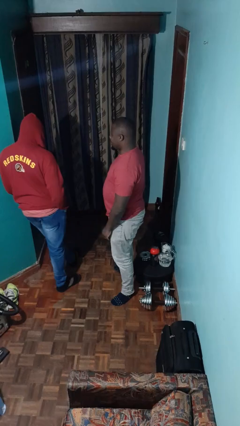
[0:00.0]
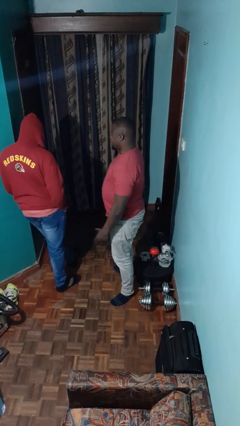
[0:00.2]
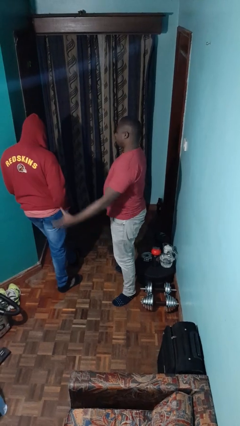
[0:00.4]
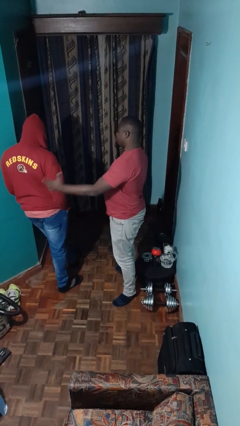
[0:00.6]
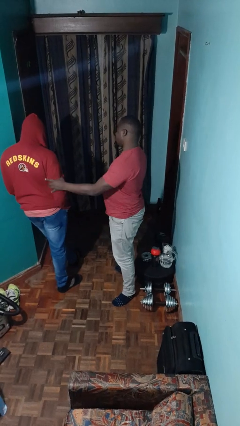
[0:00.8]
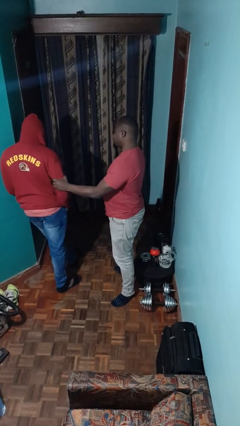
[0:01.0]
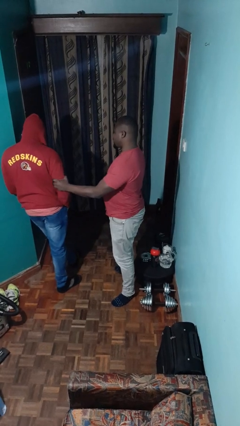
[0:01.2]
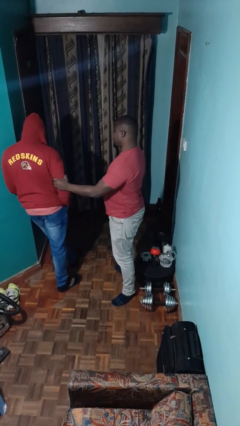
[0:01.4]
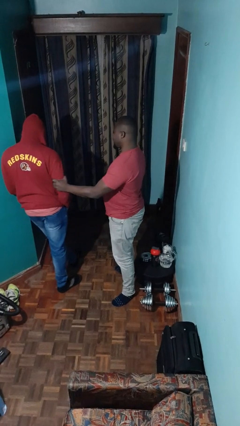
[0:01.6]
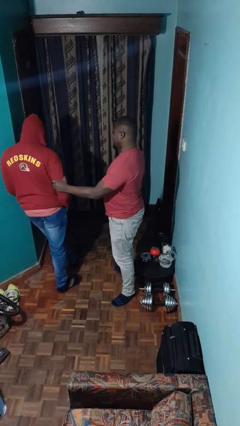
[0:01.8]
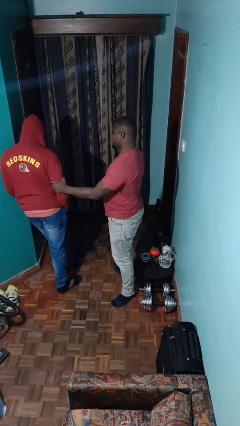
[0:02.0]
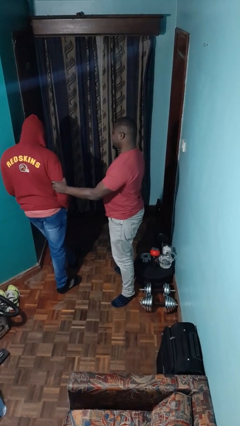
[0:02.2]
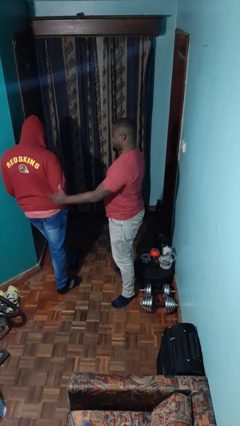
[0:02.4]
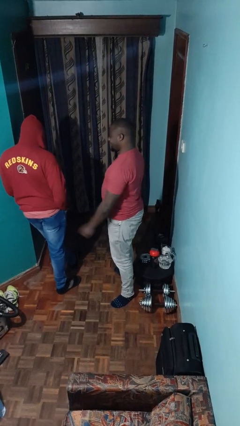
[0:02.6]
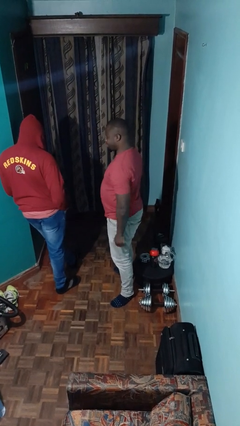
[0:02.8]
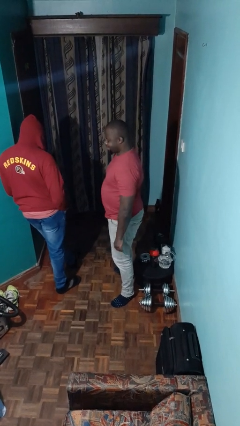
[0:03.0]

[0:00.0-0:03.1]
person grabs person by bicep

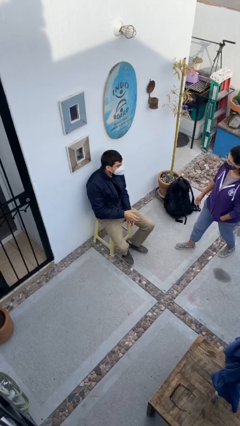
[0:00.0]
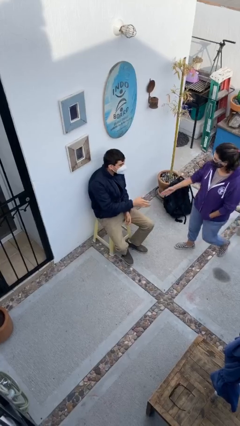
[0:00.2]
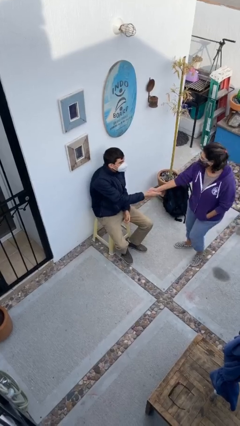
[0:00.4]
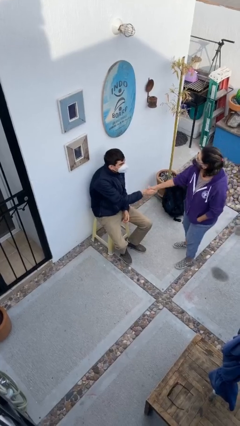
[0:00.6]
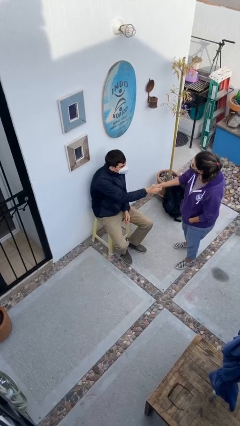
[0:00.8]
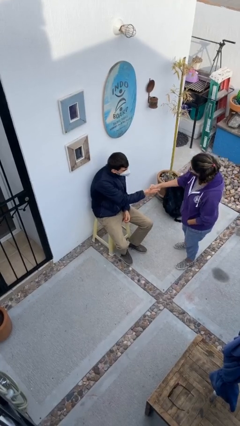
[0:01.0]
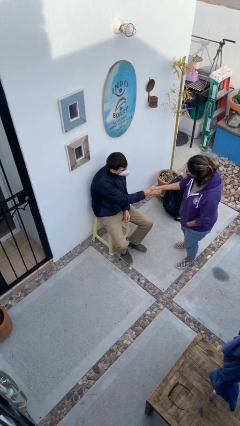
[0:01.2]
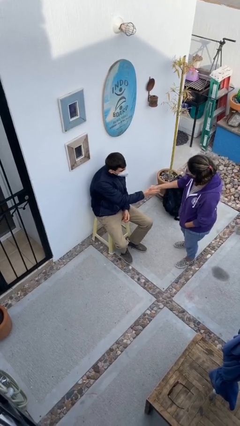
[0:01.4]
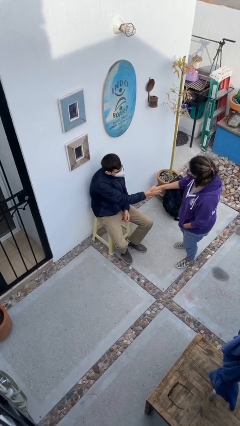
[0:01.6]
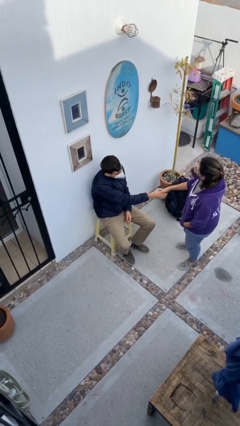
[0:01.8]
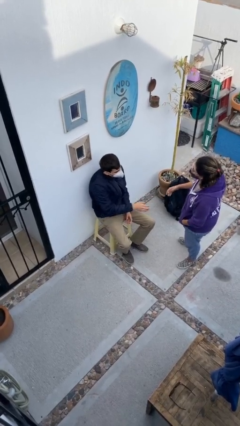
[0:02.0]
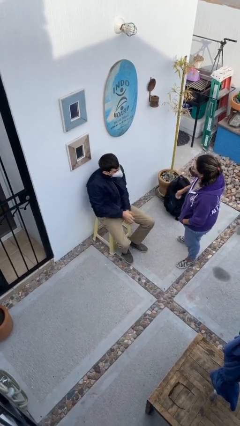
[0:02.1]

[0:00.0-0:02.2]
person shakes hand

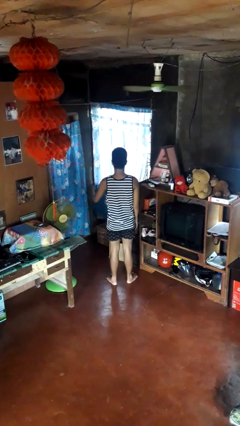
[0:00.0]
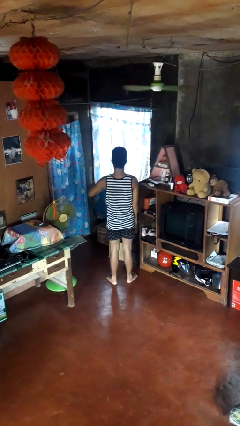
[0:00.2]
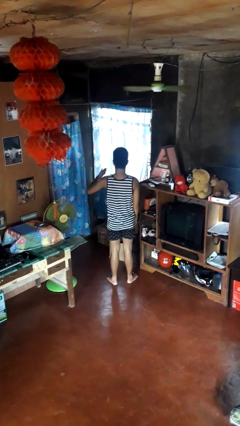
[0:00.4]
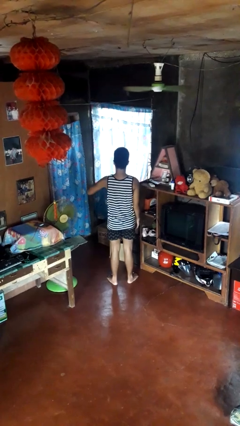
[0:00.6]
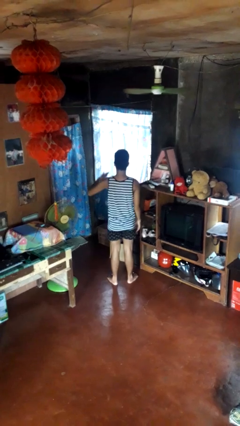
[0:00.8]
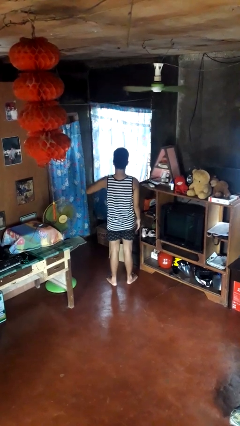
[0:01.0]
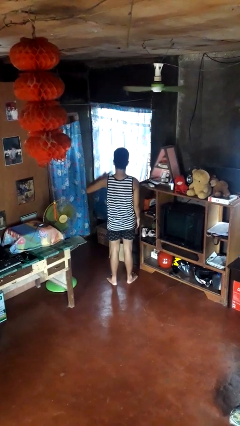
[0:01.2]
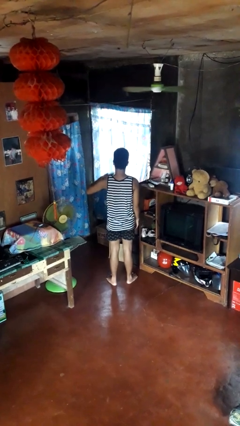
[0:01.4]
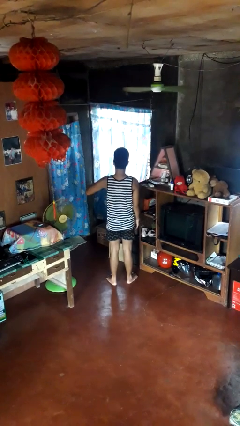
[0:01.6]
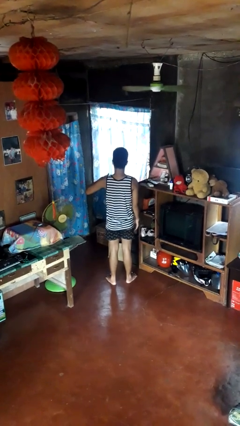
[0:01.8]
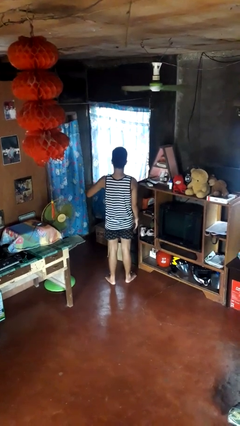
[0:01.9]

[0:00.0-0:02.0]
person drums on chest

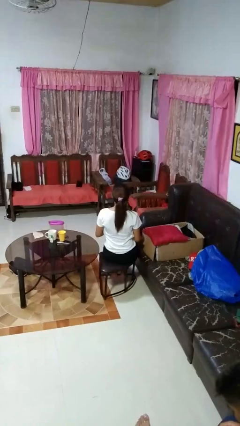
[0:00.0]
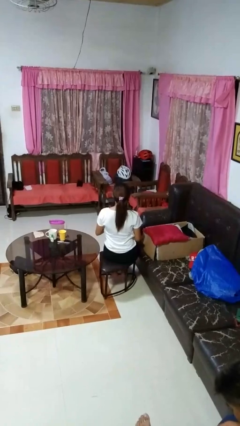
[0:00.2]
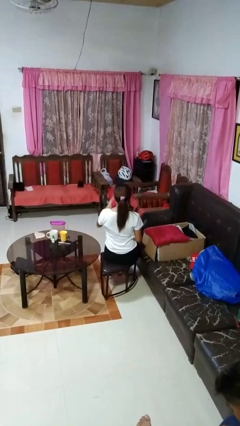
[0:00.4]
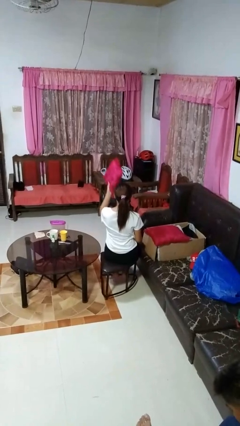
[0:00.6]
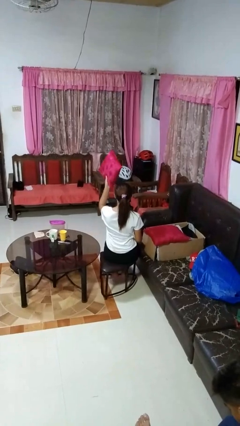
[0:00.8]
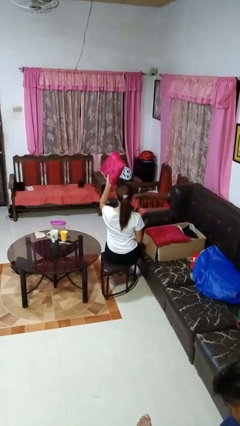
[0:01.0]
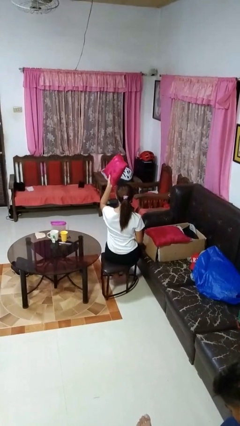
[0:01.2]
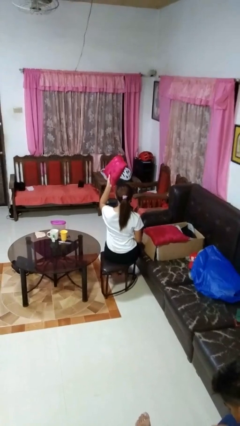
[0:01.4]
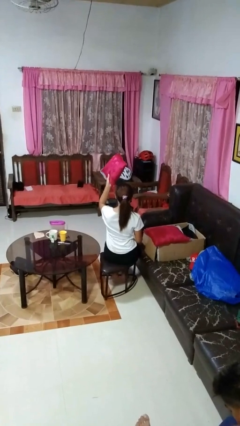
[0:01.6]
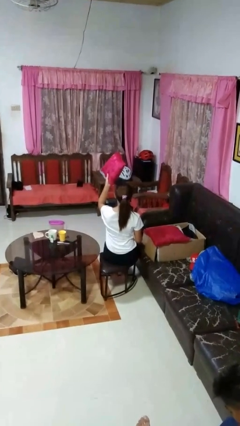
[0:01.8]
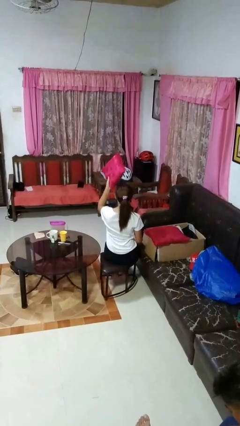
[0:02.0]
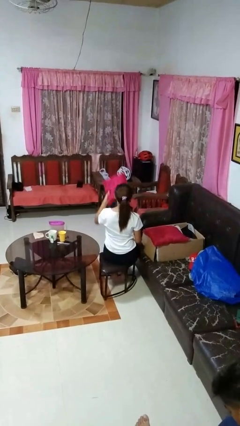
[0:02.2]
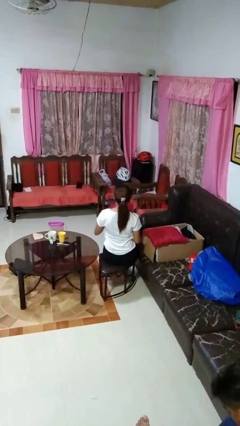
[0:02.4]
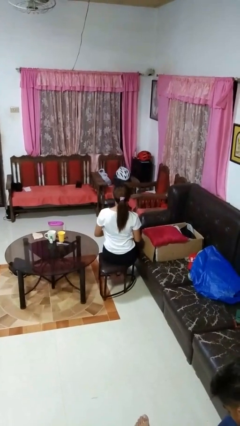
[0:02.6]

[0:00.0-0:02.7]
person holds object above head

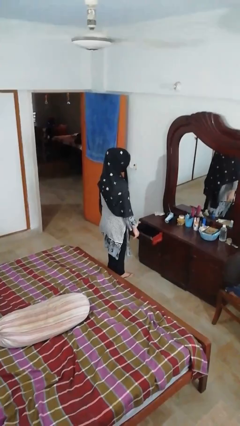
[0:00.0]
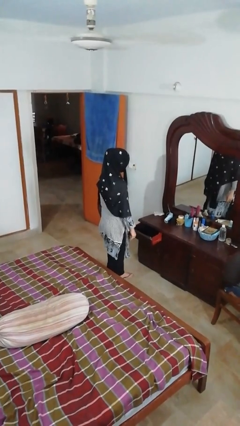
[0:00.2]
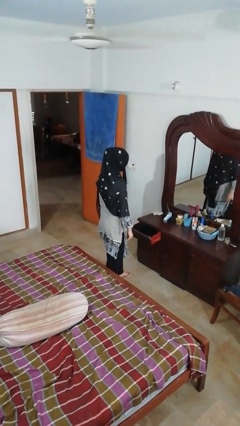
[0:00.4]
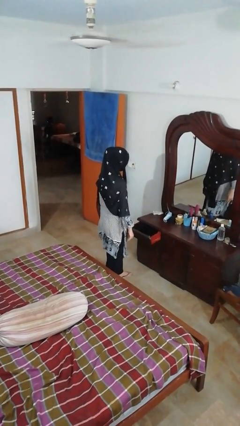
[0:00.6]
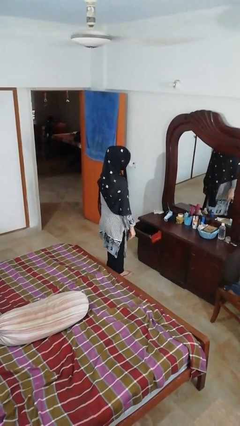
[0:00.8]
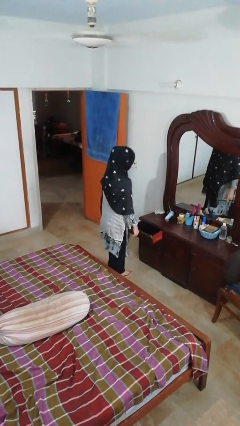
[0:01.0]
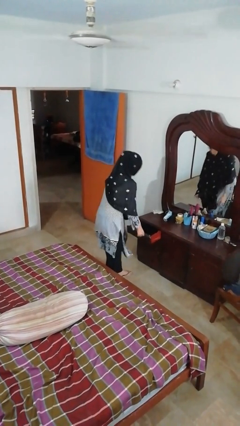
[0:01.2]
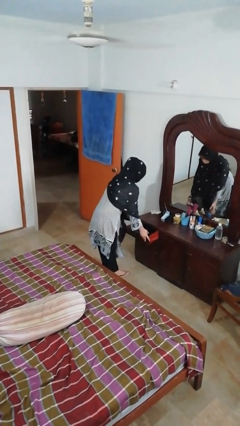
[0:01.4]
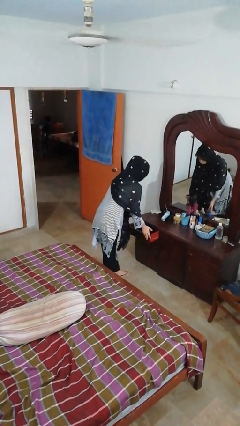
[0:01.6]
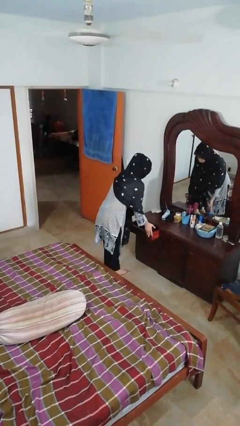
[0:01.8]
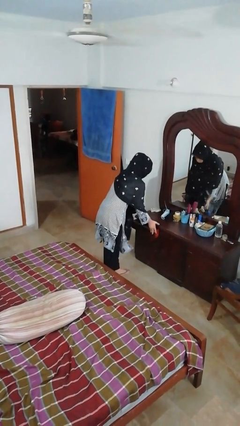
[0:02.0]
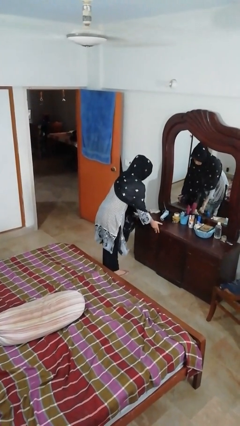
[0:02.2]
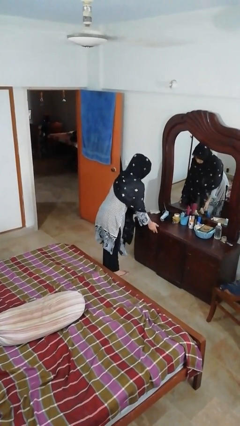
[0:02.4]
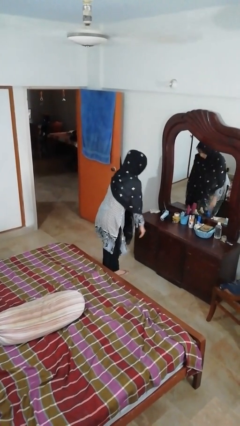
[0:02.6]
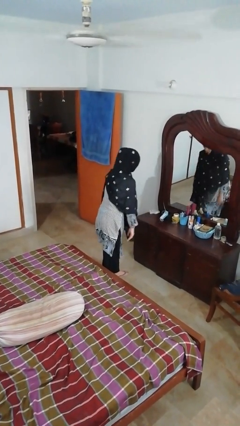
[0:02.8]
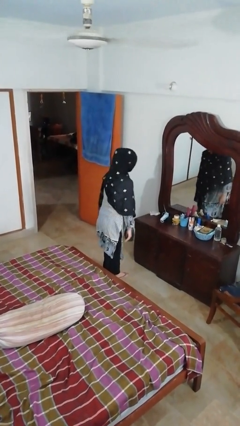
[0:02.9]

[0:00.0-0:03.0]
person closes dresser drawer

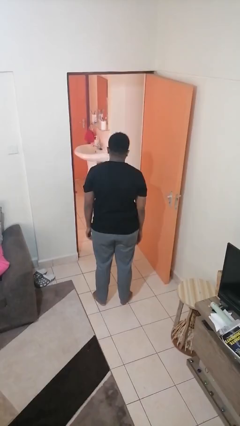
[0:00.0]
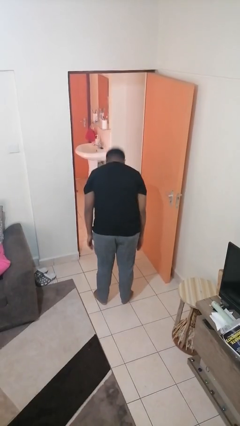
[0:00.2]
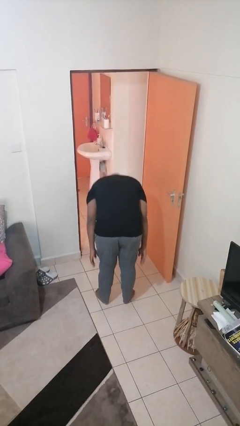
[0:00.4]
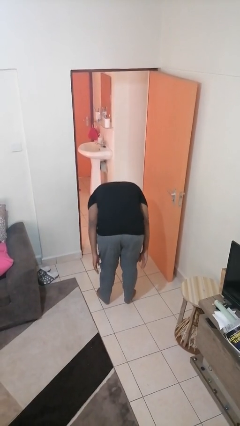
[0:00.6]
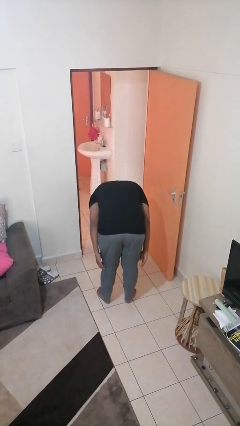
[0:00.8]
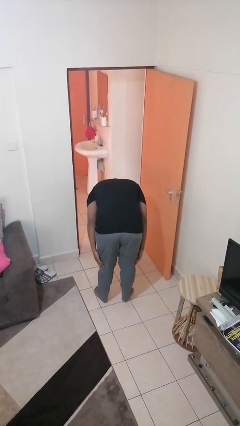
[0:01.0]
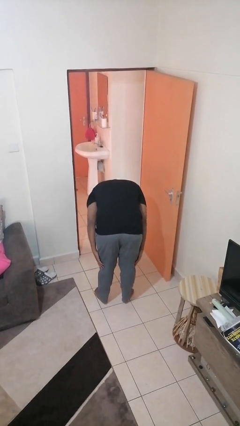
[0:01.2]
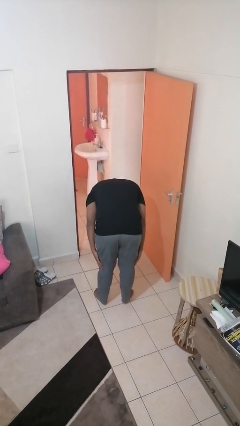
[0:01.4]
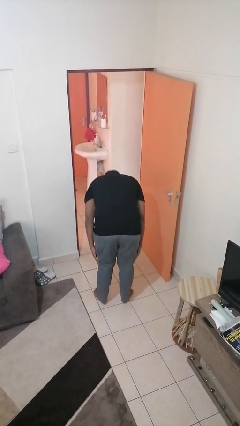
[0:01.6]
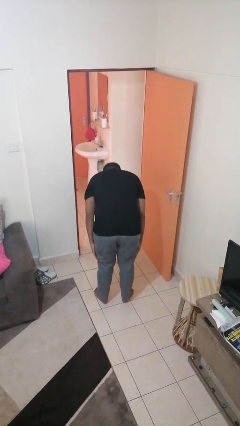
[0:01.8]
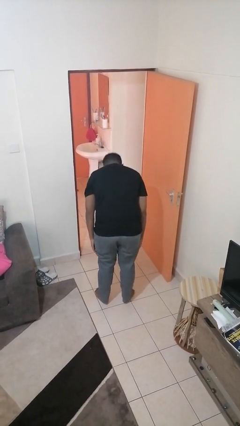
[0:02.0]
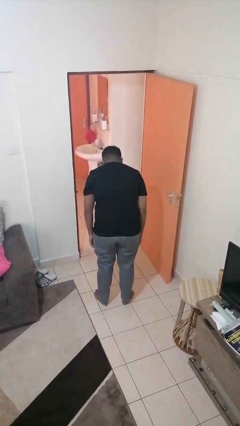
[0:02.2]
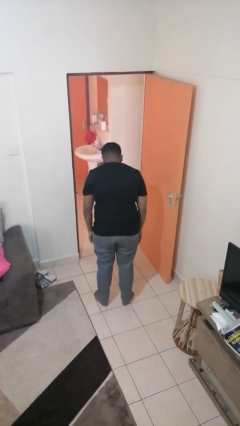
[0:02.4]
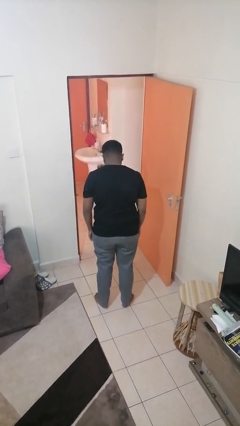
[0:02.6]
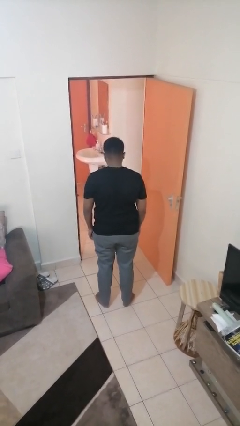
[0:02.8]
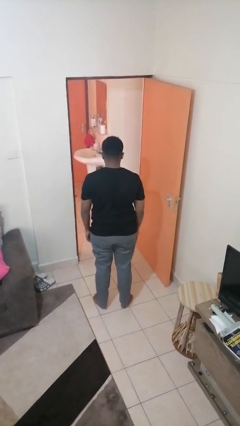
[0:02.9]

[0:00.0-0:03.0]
person bows

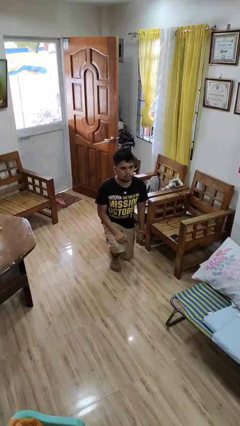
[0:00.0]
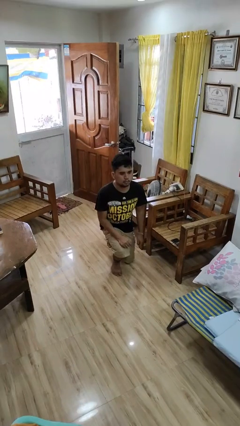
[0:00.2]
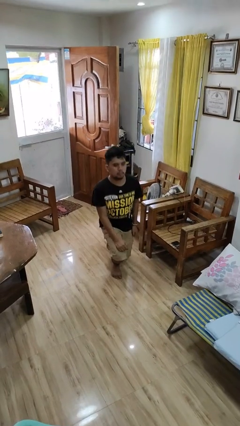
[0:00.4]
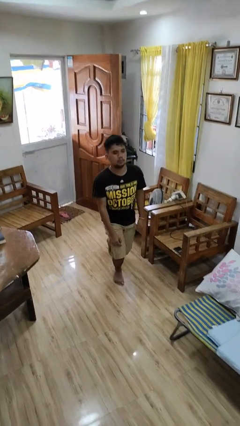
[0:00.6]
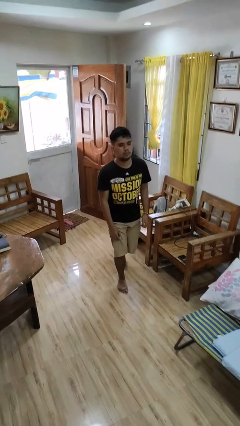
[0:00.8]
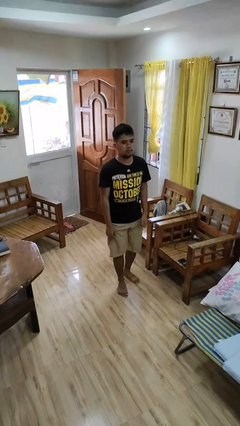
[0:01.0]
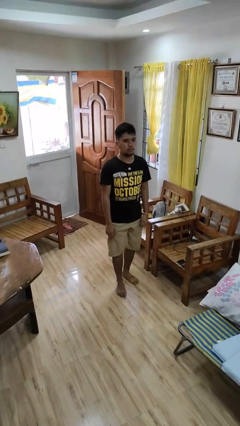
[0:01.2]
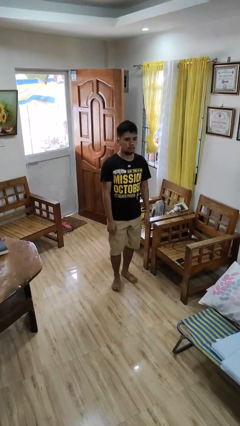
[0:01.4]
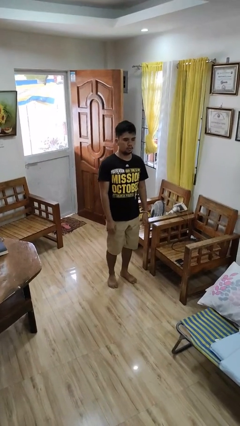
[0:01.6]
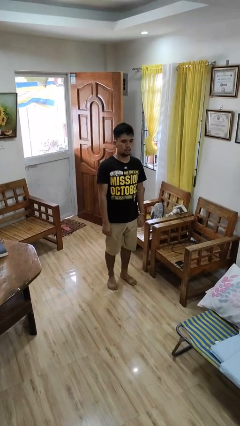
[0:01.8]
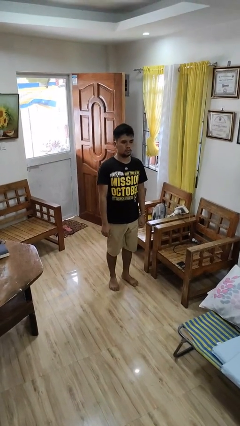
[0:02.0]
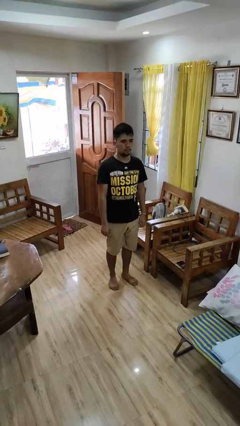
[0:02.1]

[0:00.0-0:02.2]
person stands up from floor
